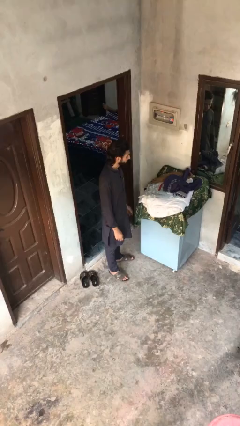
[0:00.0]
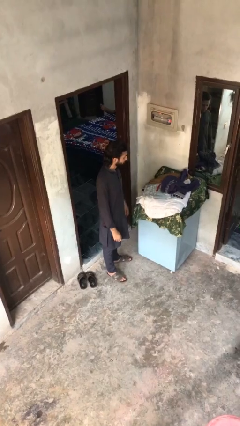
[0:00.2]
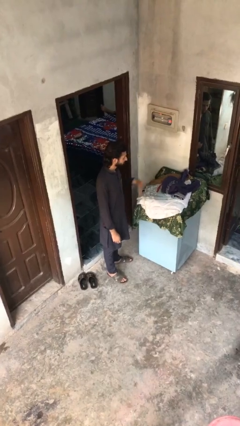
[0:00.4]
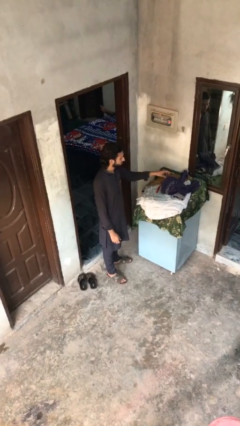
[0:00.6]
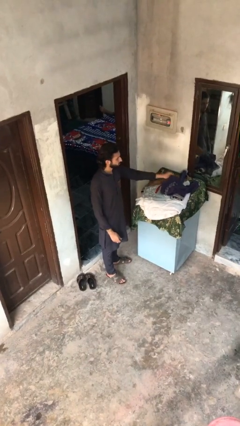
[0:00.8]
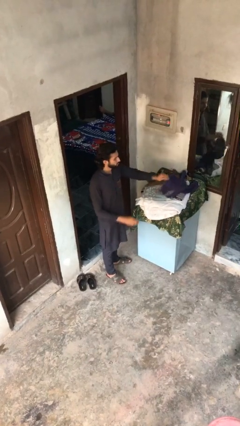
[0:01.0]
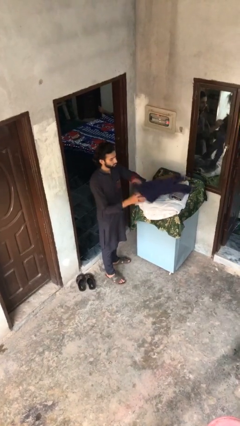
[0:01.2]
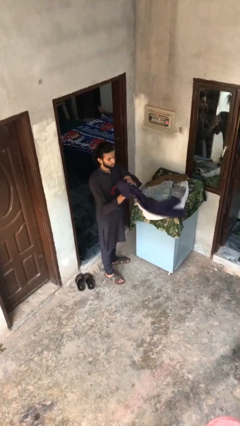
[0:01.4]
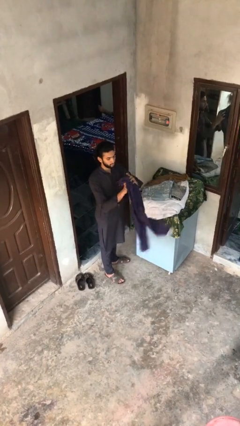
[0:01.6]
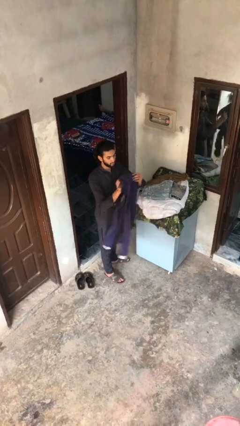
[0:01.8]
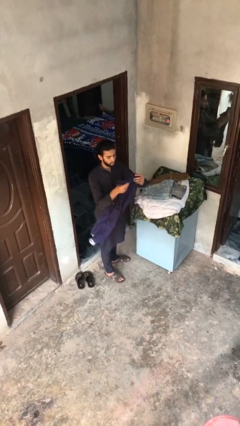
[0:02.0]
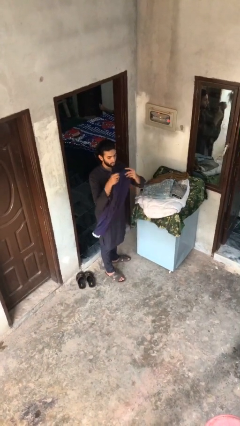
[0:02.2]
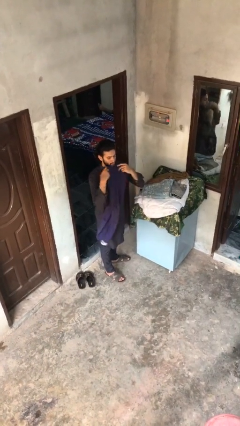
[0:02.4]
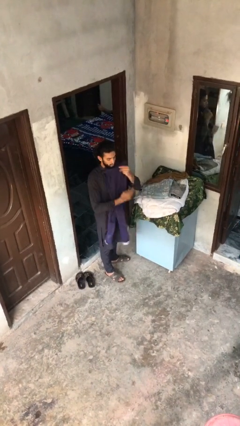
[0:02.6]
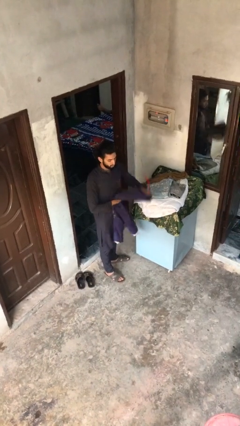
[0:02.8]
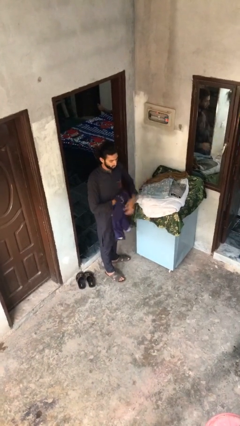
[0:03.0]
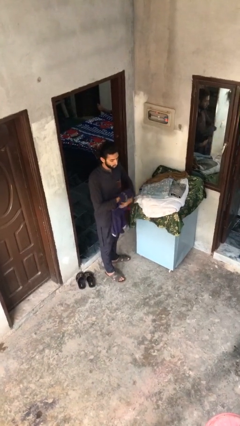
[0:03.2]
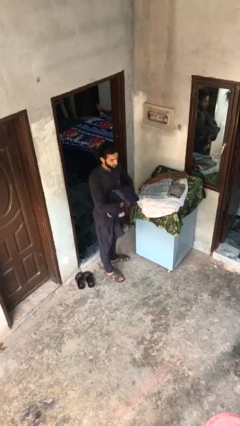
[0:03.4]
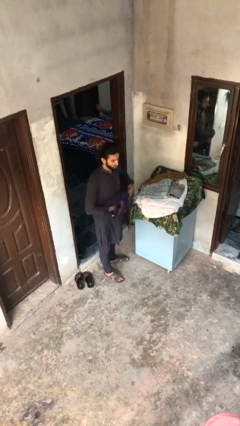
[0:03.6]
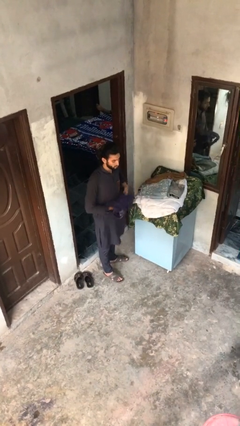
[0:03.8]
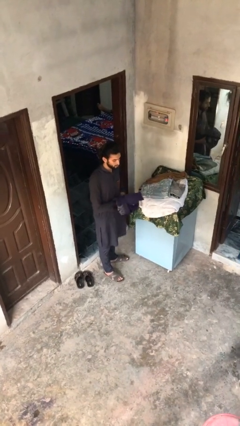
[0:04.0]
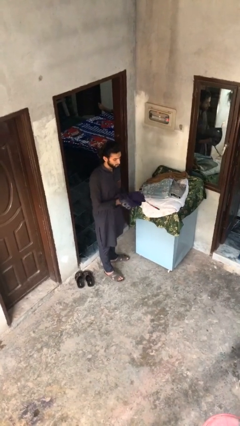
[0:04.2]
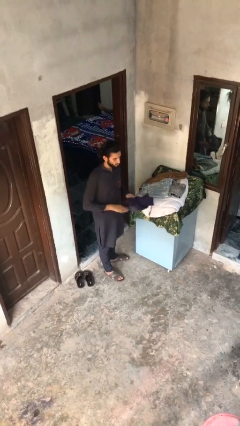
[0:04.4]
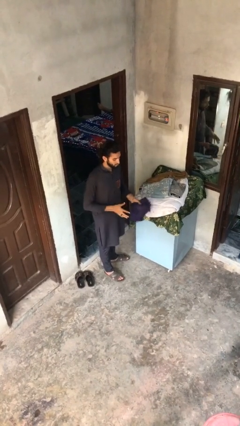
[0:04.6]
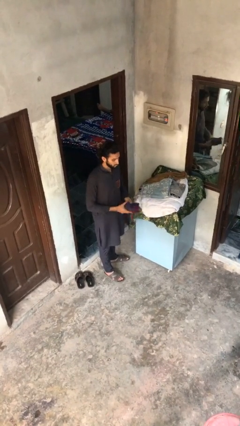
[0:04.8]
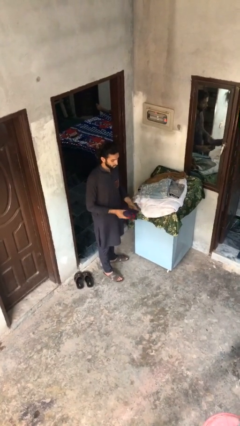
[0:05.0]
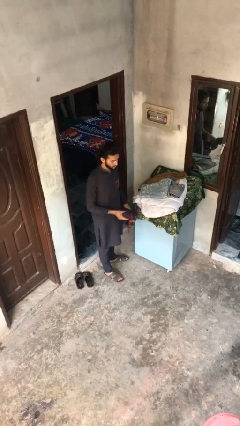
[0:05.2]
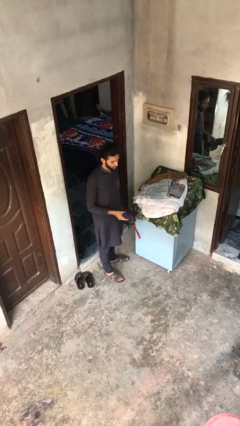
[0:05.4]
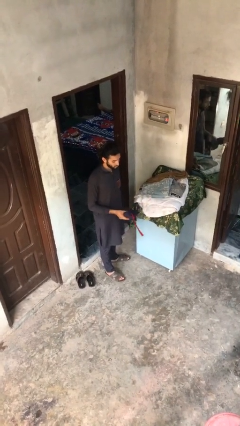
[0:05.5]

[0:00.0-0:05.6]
person folds pants

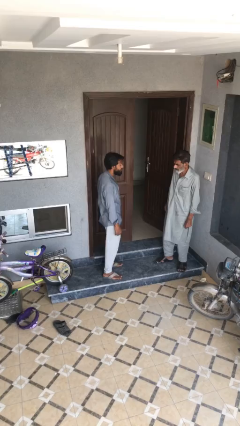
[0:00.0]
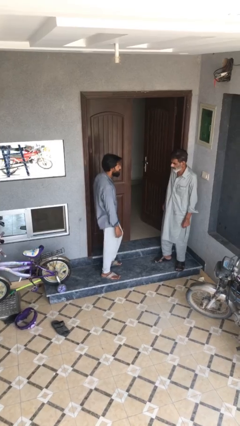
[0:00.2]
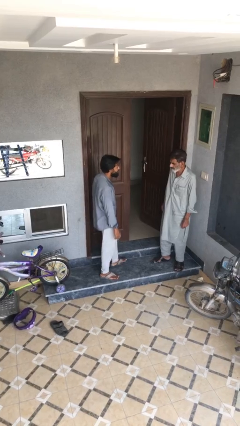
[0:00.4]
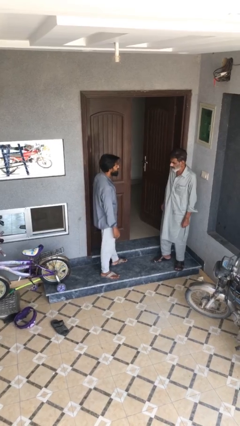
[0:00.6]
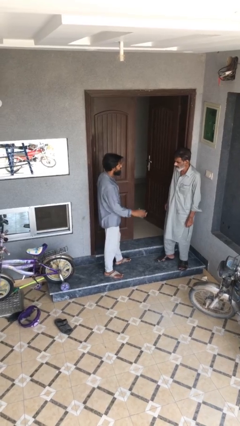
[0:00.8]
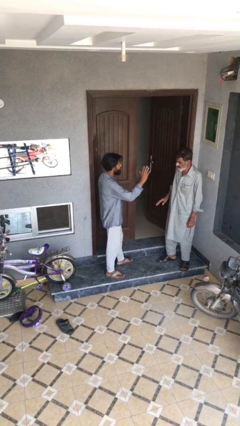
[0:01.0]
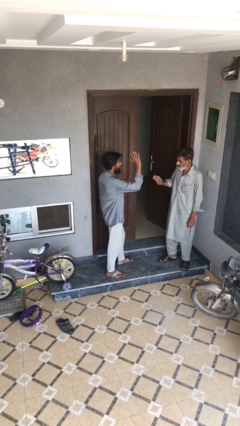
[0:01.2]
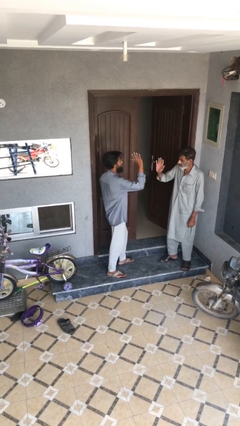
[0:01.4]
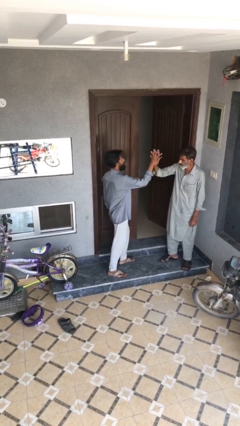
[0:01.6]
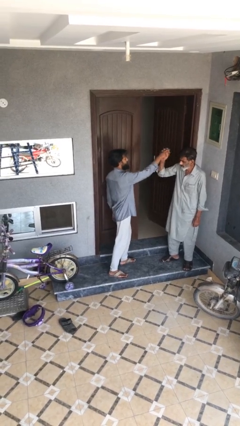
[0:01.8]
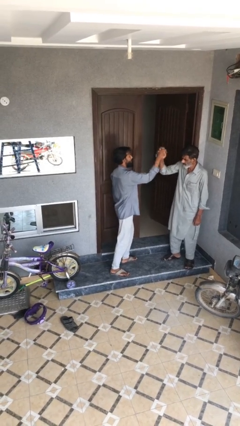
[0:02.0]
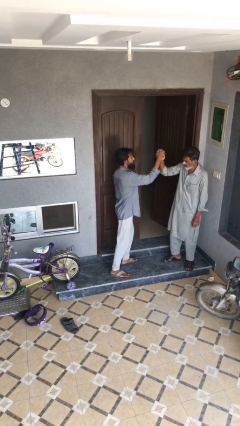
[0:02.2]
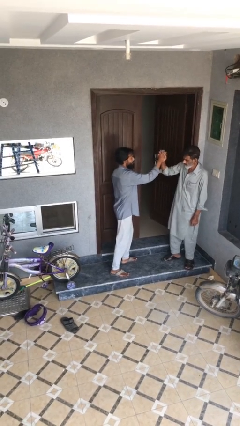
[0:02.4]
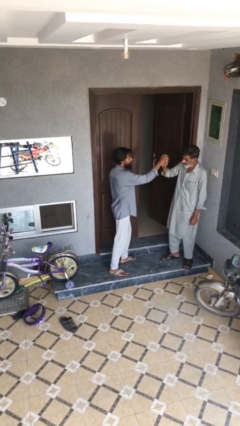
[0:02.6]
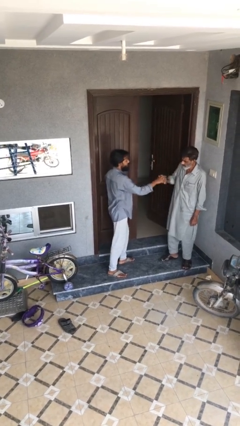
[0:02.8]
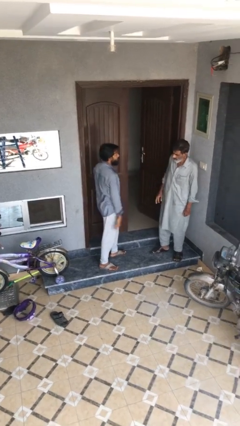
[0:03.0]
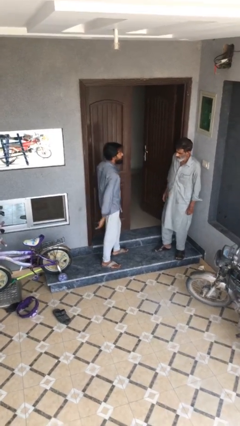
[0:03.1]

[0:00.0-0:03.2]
person highfives hand

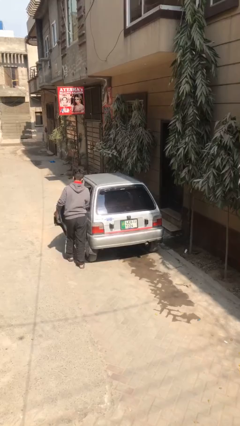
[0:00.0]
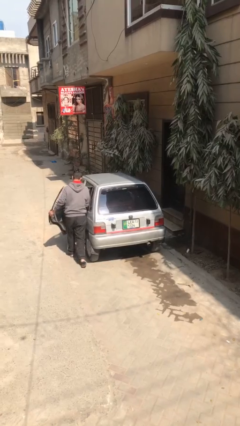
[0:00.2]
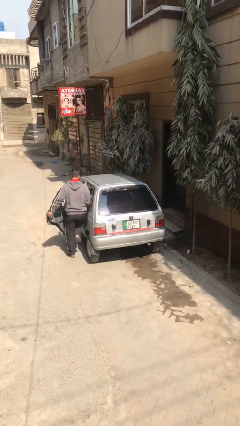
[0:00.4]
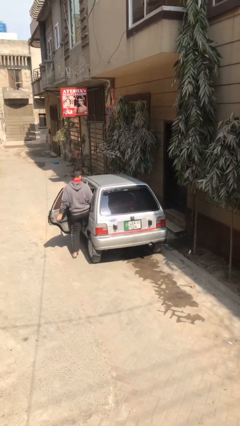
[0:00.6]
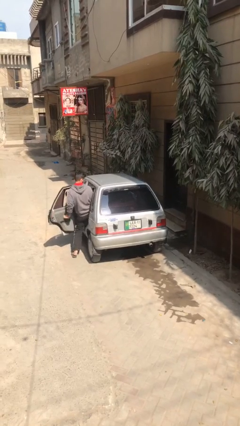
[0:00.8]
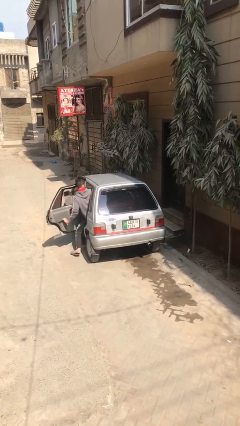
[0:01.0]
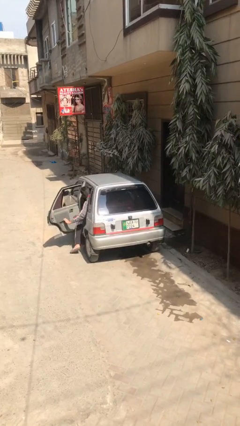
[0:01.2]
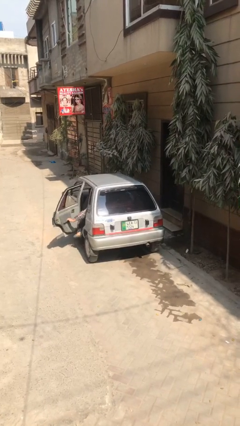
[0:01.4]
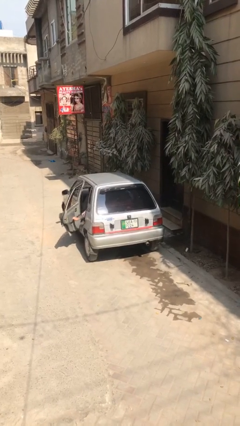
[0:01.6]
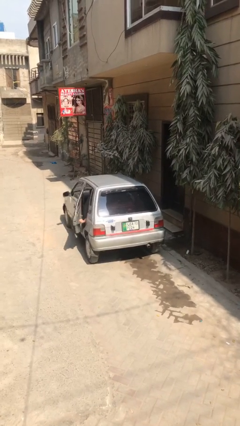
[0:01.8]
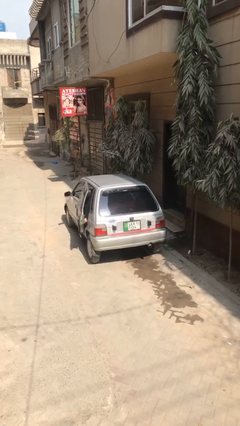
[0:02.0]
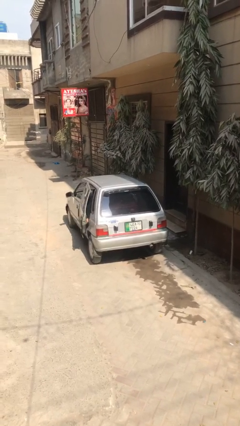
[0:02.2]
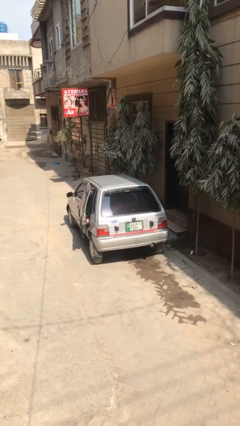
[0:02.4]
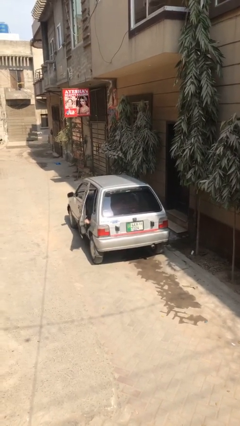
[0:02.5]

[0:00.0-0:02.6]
car picks up person

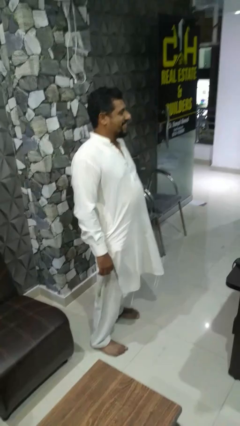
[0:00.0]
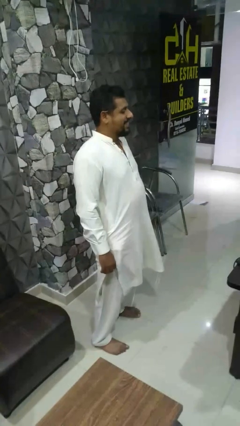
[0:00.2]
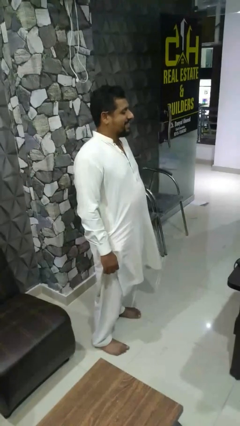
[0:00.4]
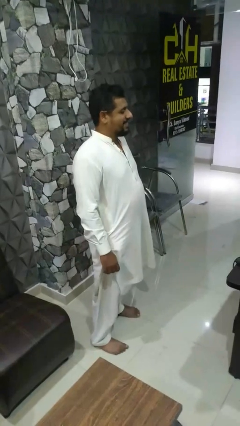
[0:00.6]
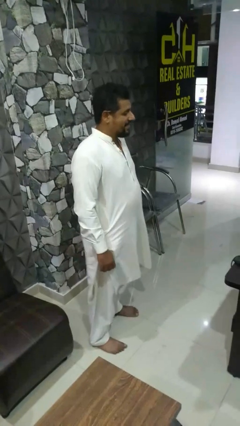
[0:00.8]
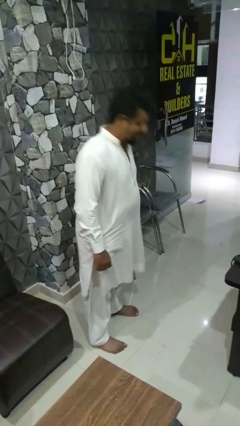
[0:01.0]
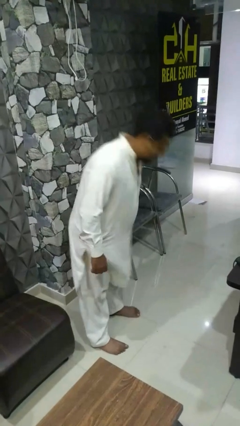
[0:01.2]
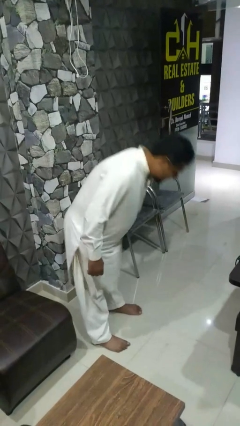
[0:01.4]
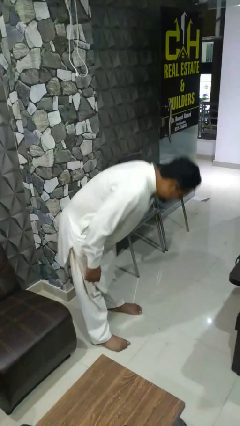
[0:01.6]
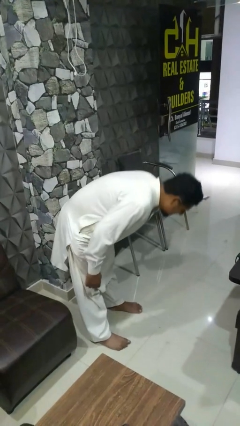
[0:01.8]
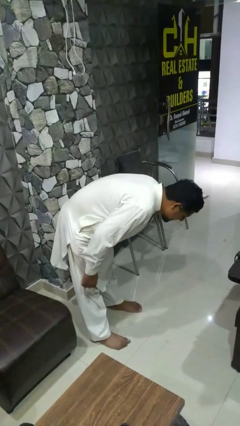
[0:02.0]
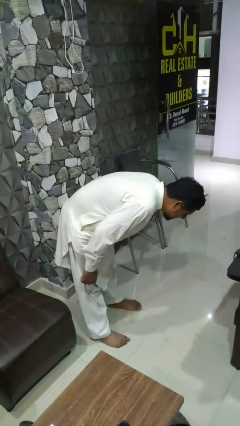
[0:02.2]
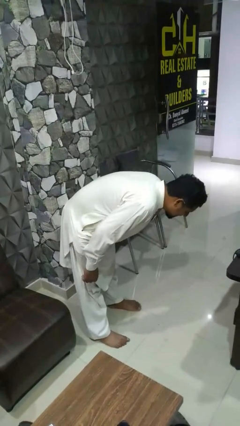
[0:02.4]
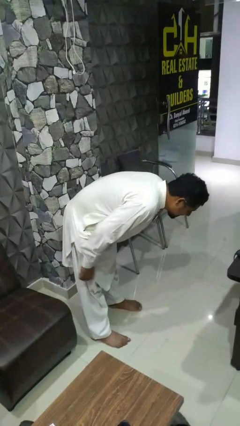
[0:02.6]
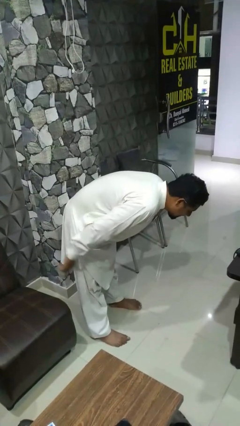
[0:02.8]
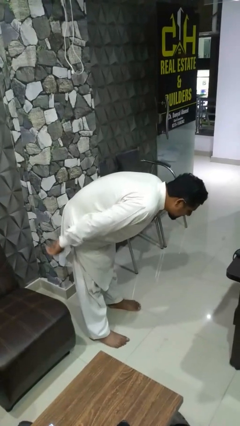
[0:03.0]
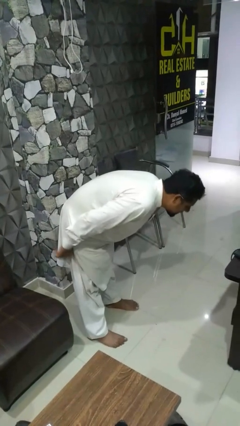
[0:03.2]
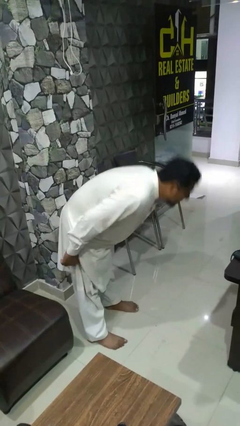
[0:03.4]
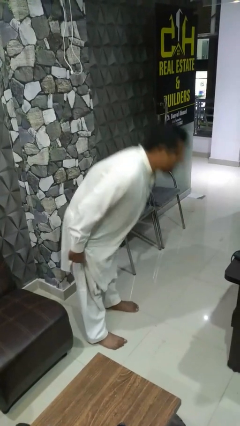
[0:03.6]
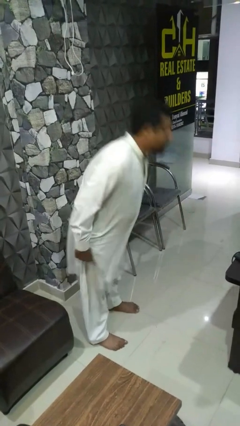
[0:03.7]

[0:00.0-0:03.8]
person bows

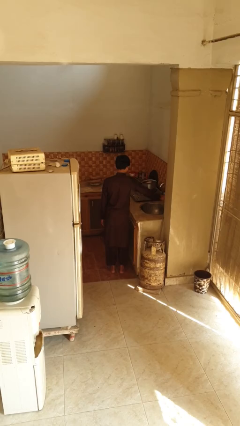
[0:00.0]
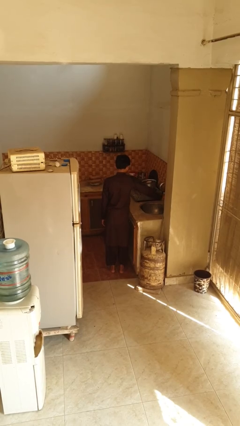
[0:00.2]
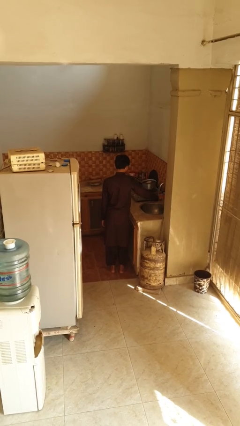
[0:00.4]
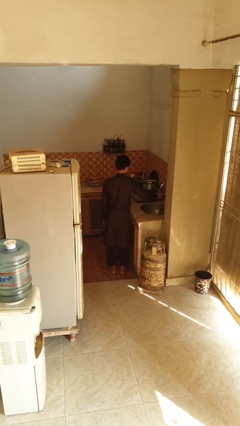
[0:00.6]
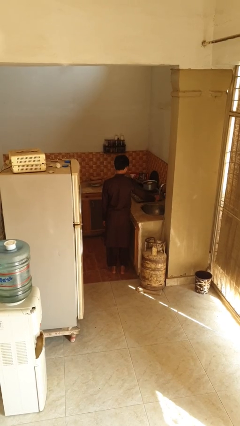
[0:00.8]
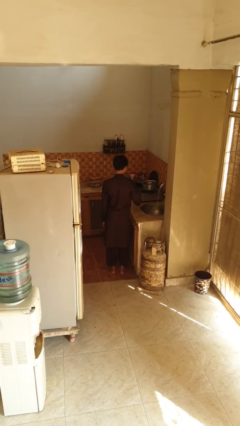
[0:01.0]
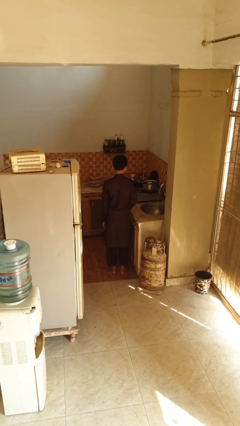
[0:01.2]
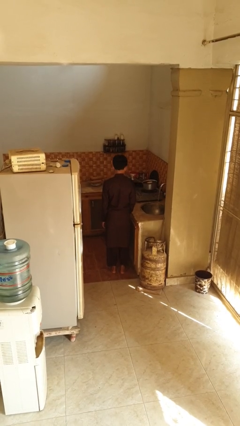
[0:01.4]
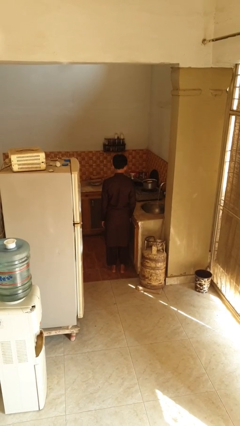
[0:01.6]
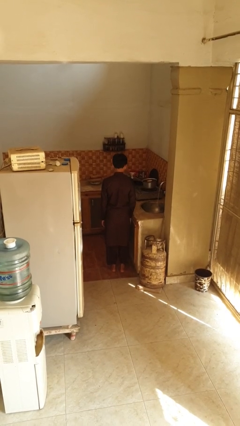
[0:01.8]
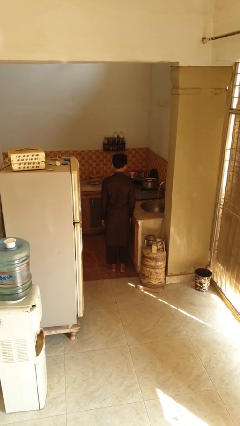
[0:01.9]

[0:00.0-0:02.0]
person turns on faucet

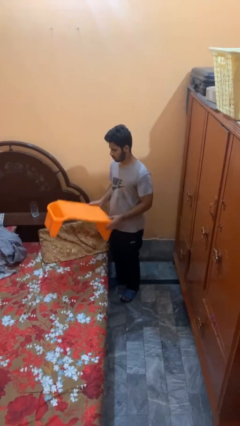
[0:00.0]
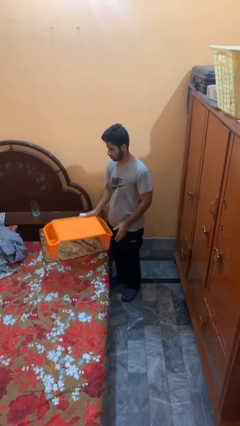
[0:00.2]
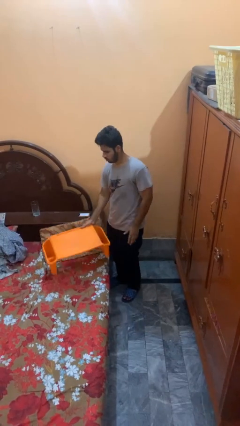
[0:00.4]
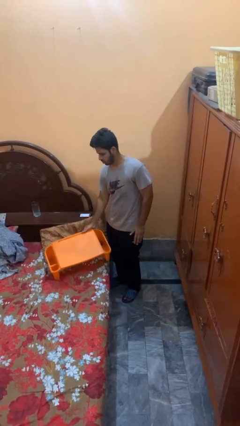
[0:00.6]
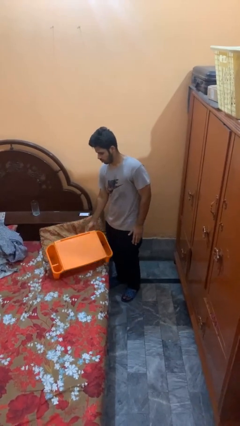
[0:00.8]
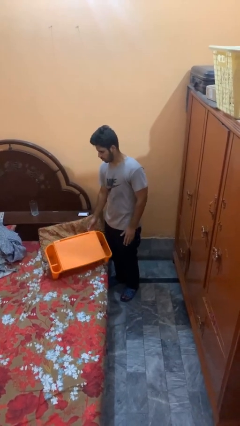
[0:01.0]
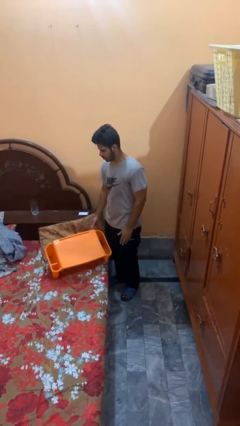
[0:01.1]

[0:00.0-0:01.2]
person puts down object on bed
